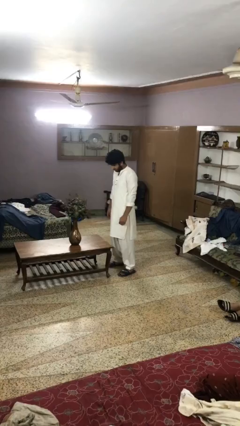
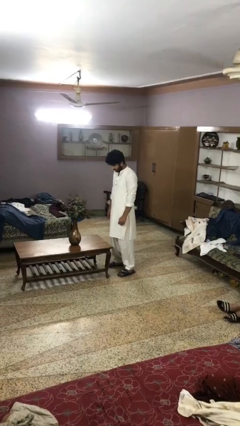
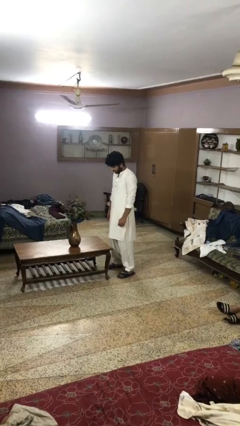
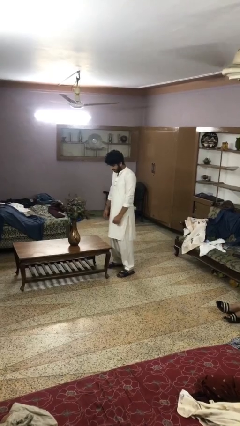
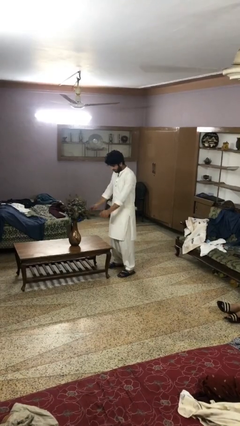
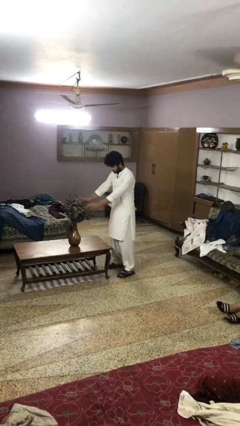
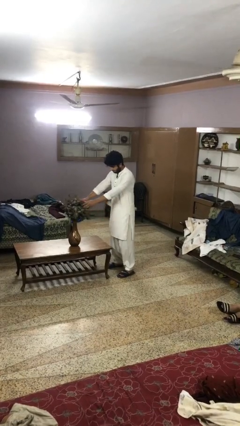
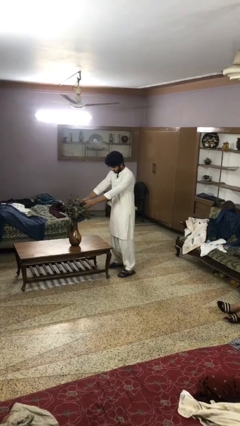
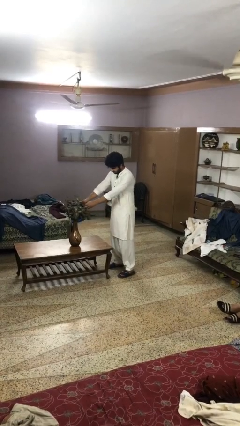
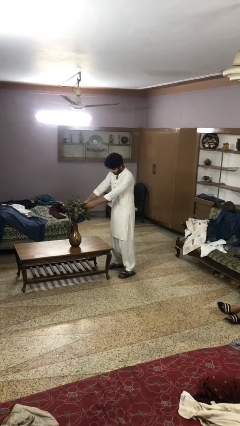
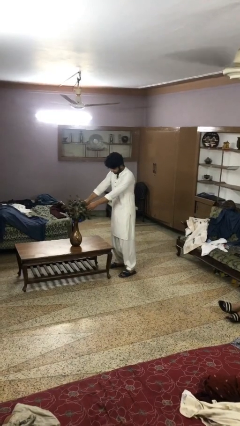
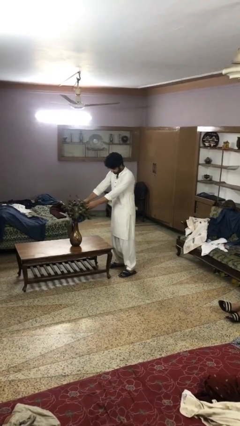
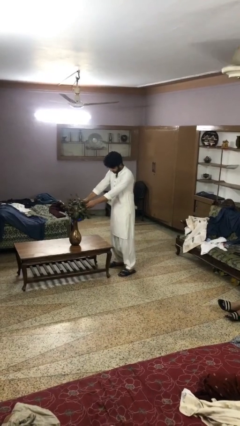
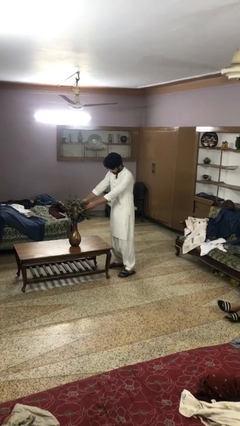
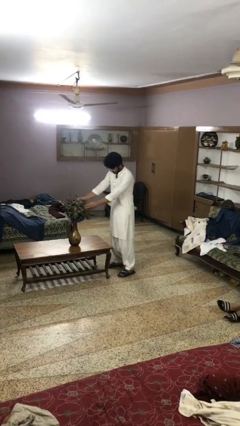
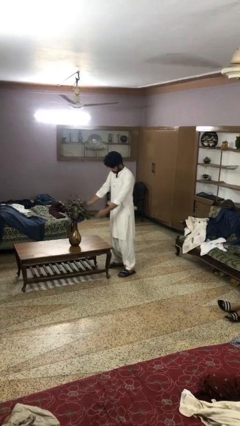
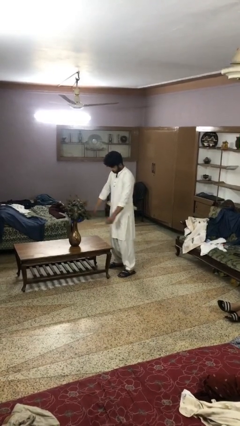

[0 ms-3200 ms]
person arranges flowers in vase

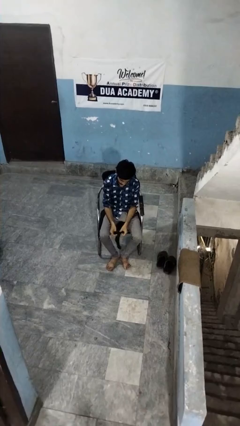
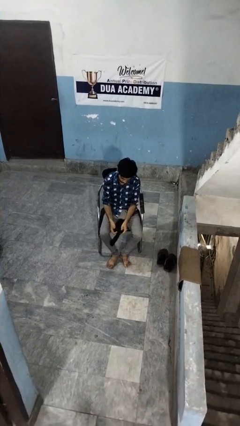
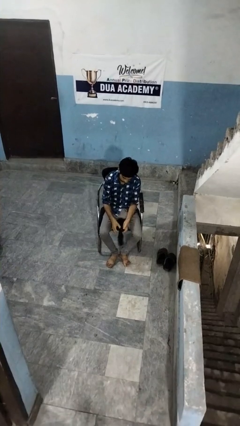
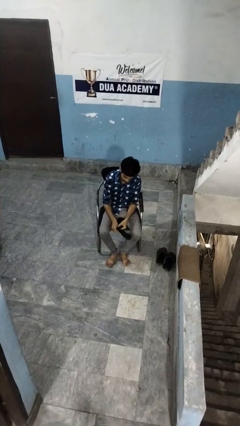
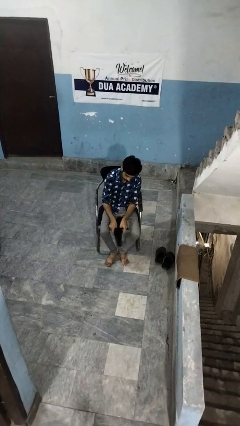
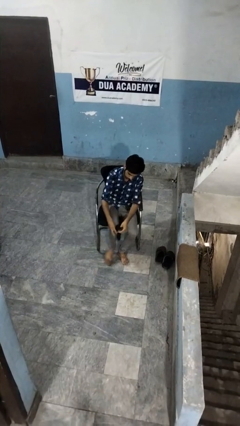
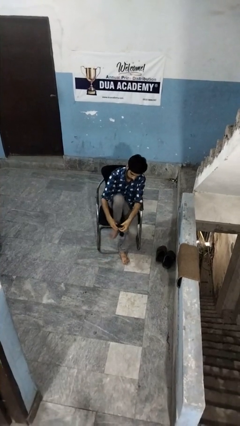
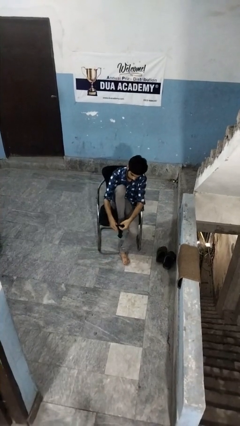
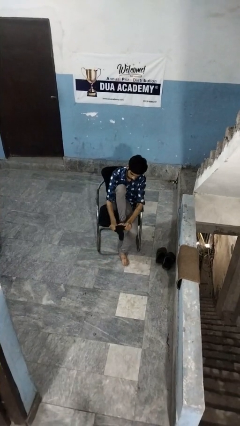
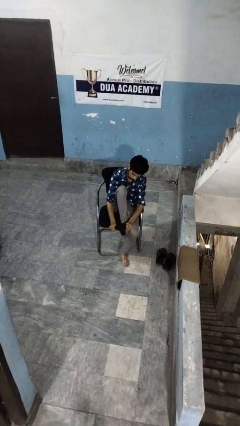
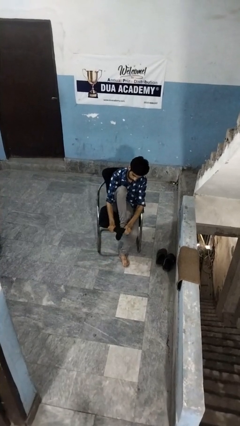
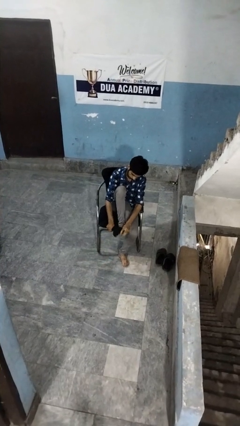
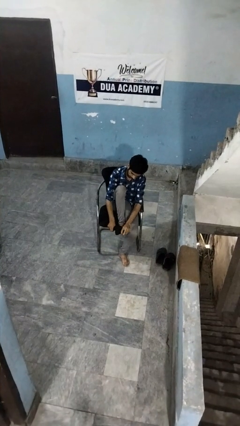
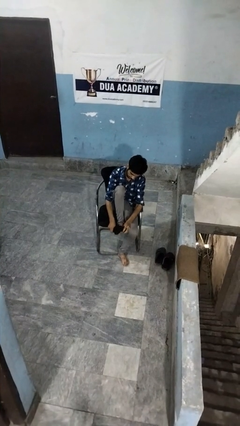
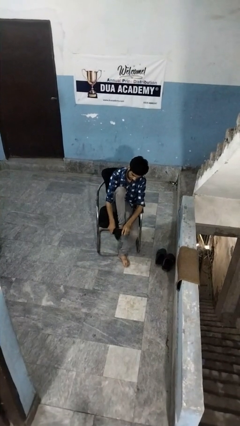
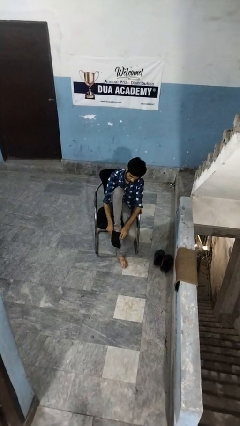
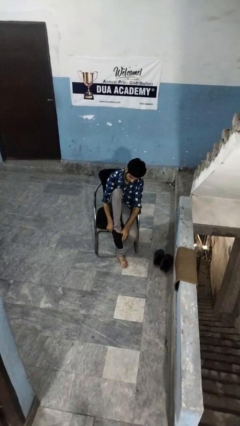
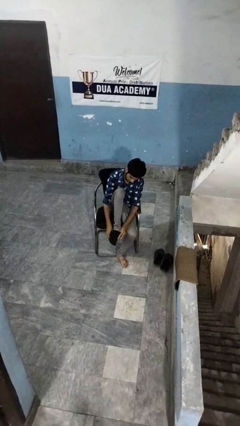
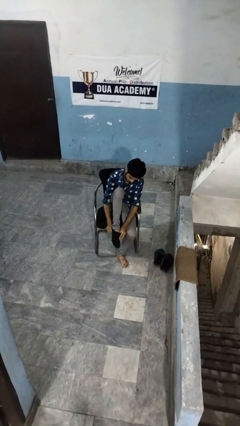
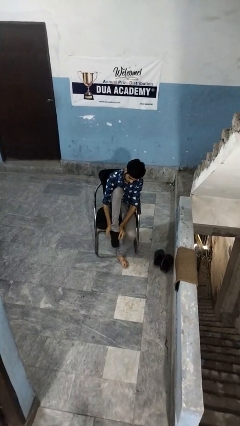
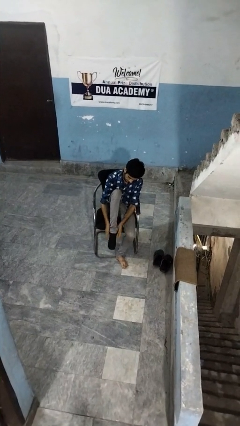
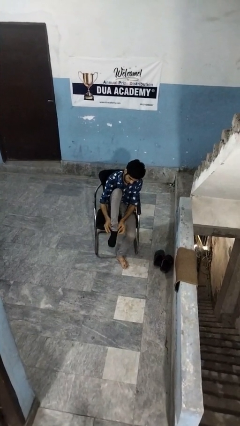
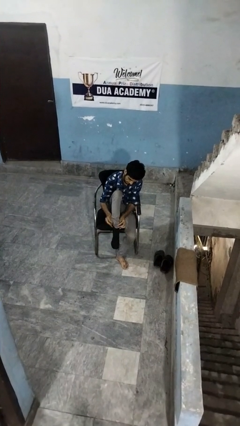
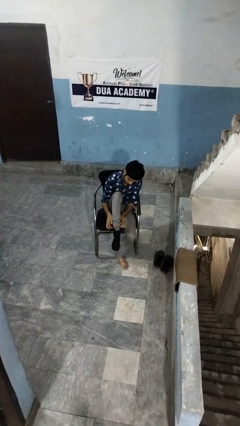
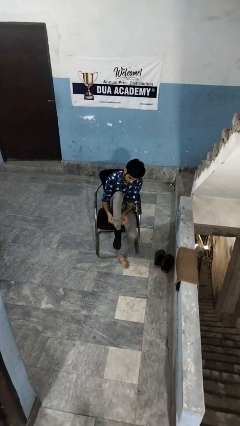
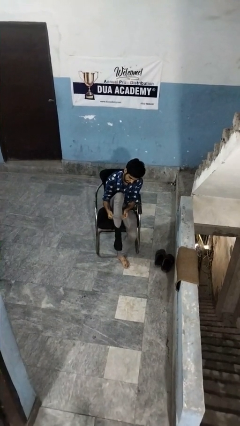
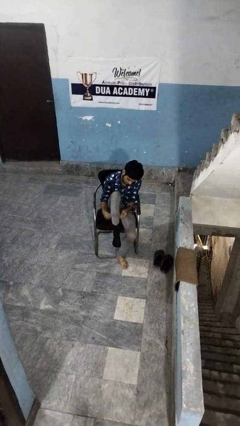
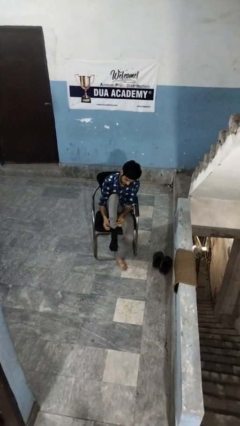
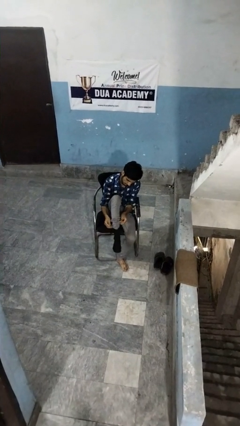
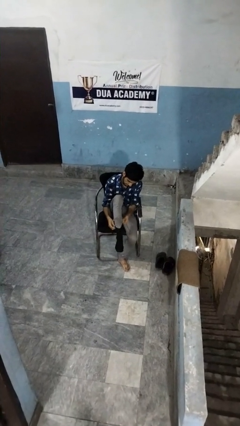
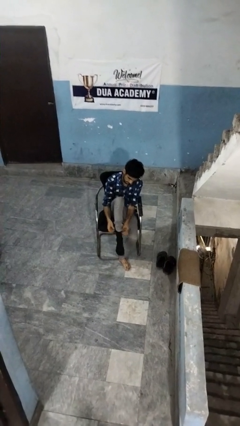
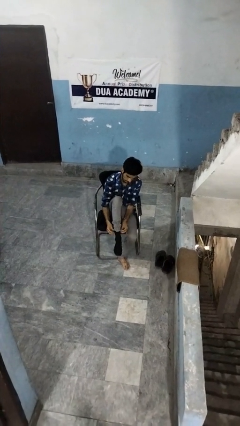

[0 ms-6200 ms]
person puts on socks

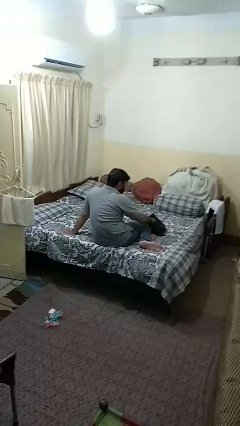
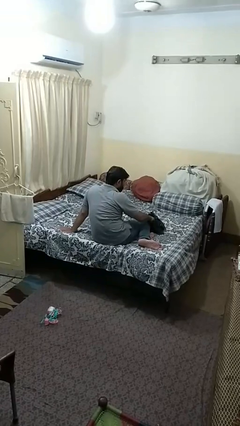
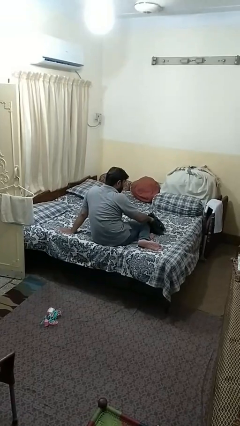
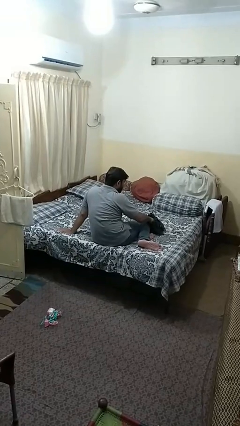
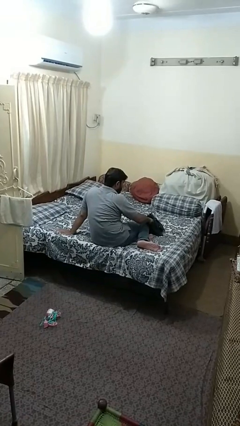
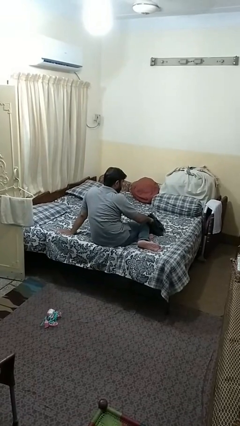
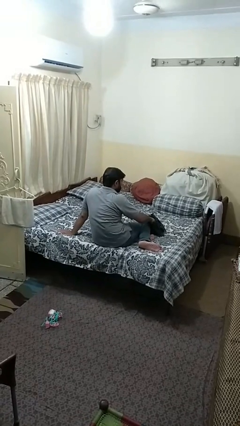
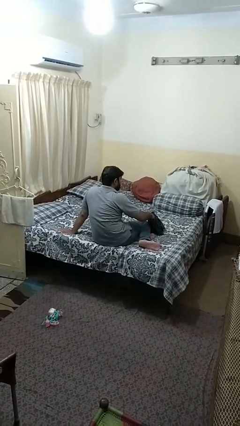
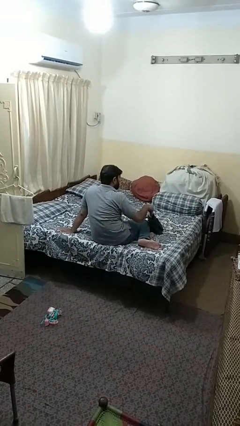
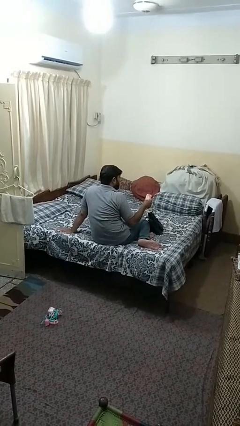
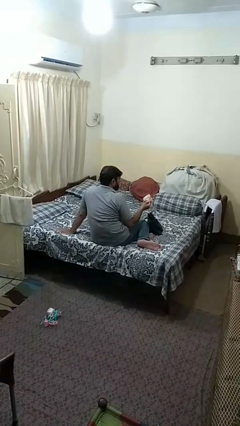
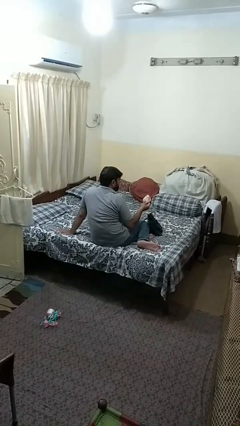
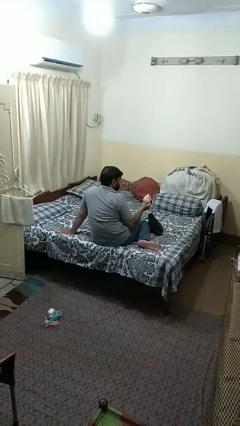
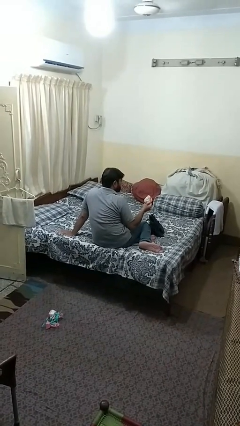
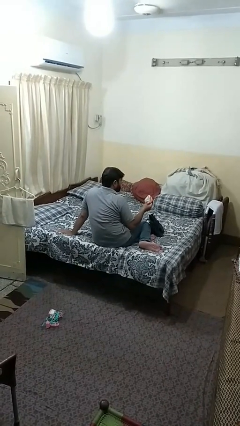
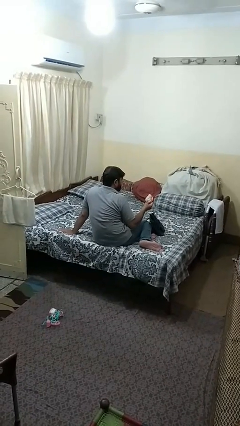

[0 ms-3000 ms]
person takes object from purse

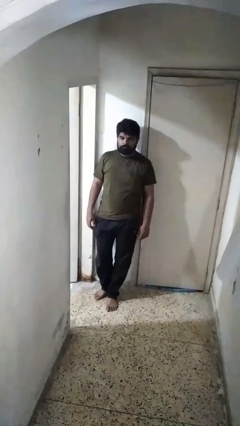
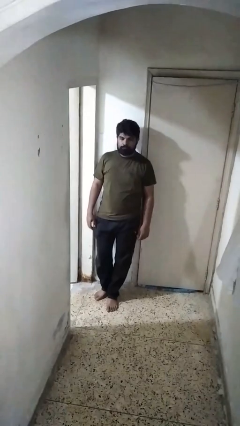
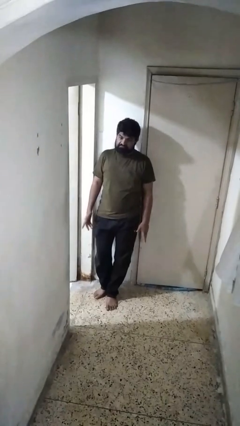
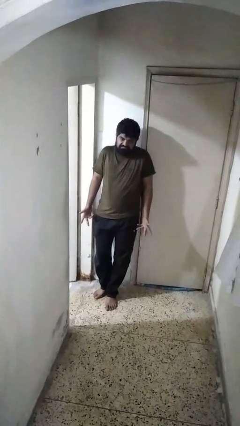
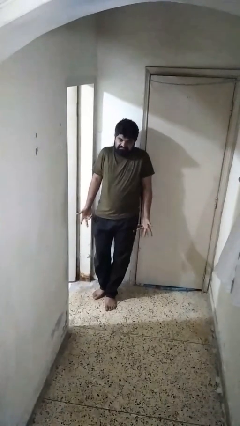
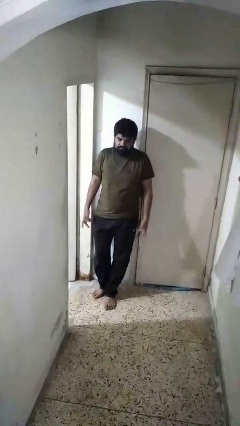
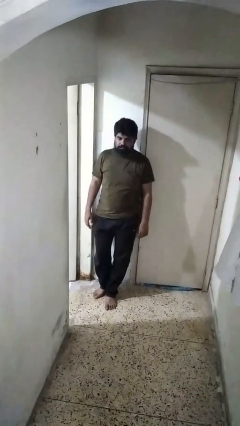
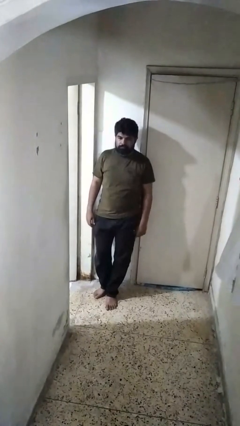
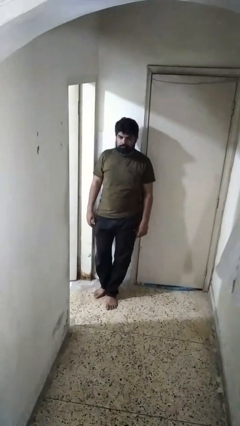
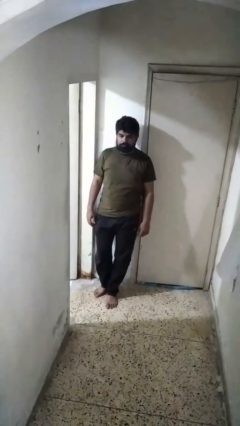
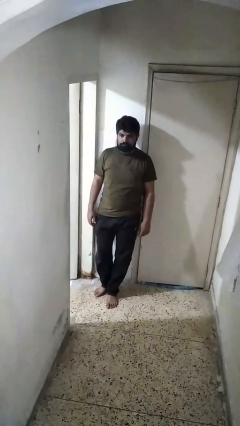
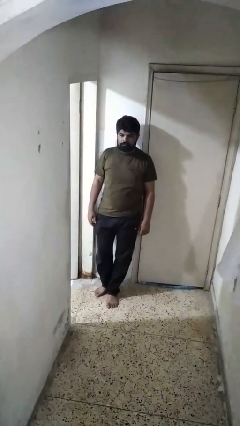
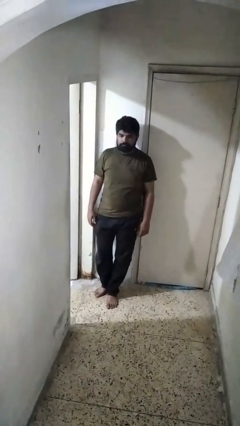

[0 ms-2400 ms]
person shrugs

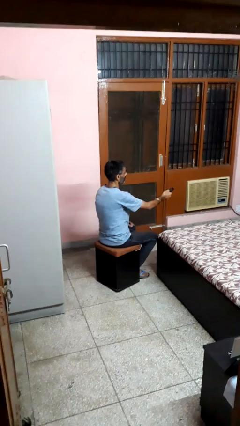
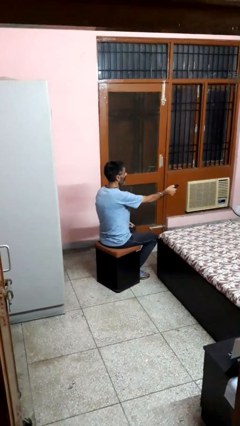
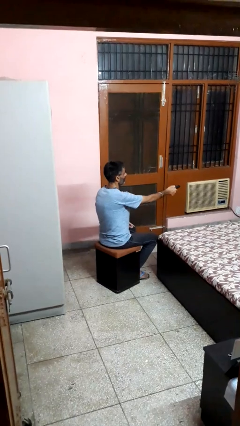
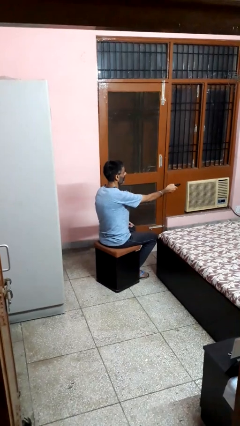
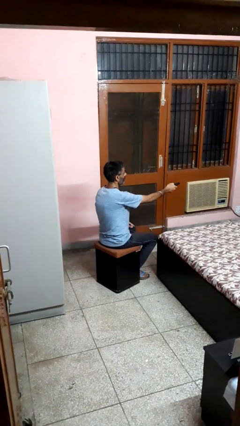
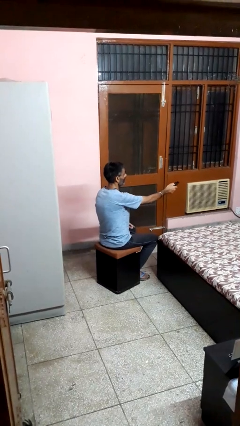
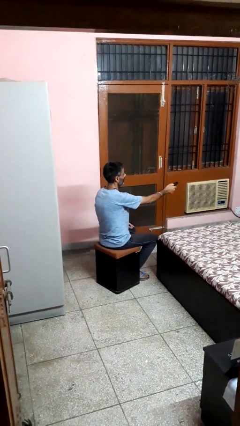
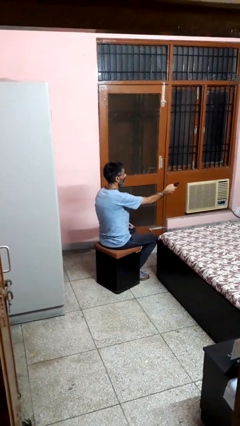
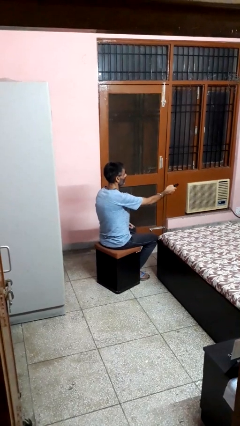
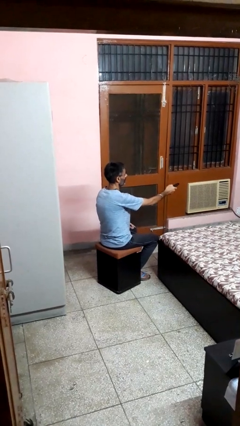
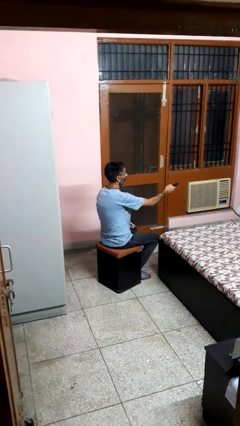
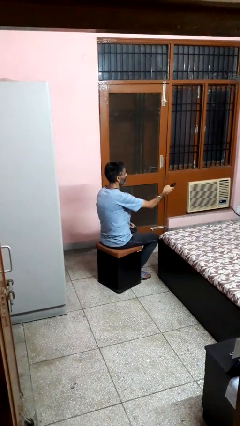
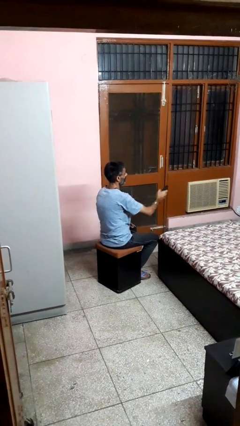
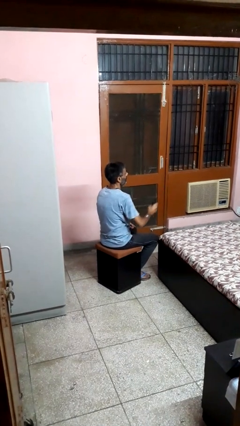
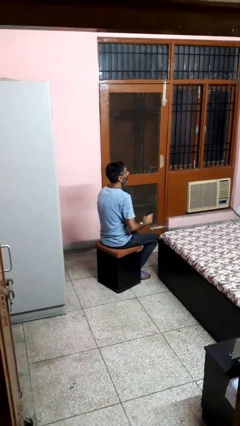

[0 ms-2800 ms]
person uses television remote
